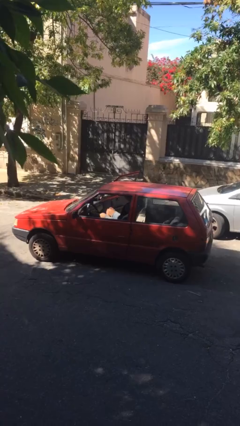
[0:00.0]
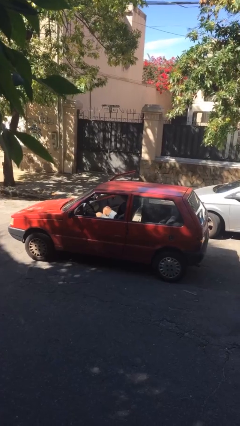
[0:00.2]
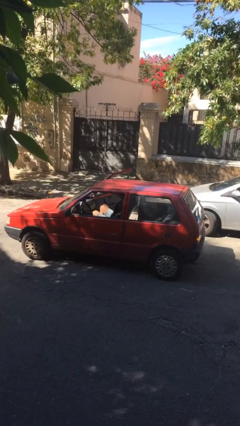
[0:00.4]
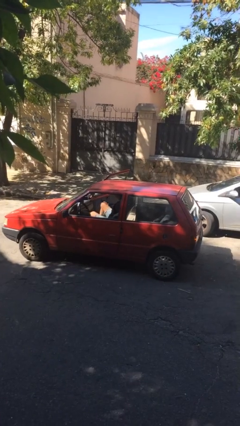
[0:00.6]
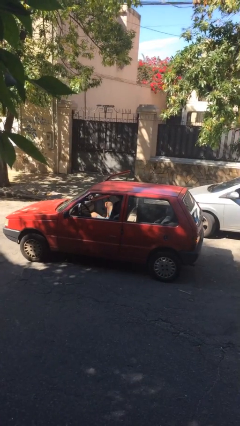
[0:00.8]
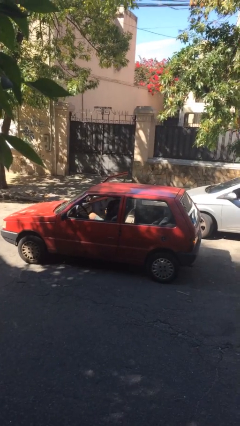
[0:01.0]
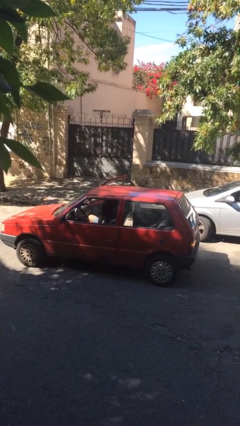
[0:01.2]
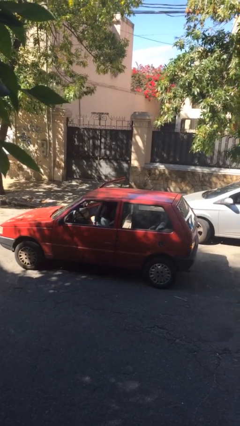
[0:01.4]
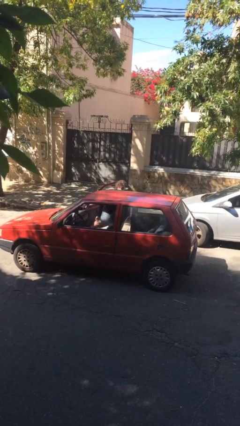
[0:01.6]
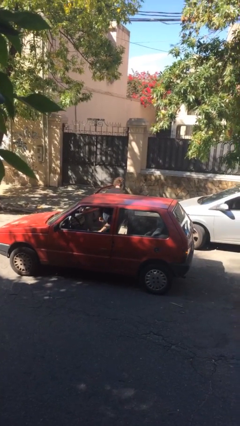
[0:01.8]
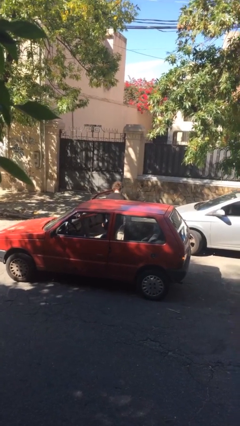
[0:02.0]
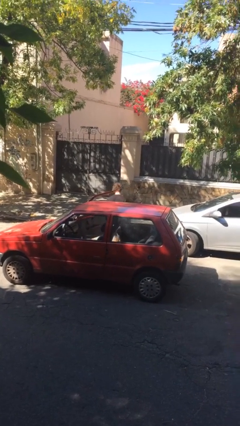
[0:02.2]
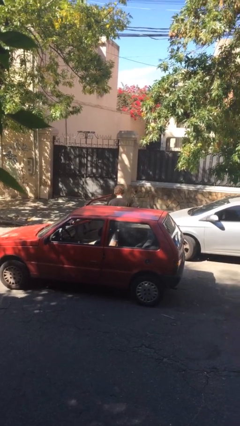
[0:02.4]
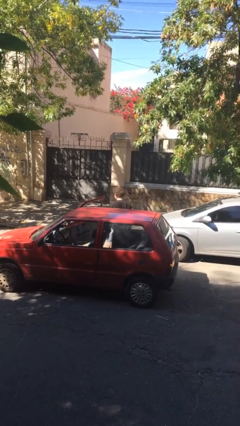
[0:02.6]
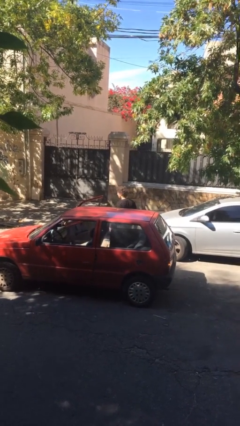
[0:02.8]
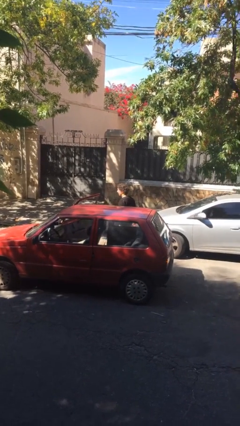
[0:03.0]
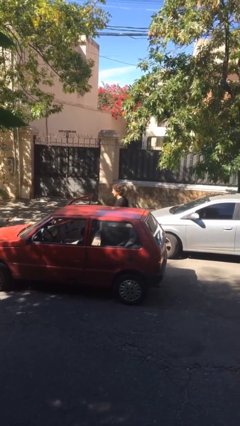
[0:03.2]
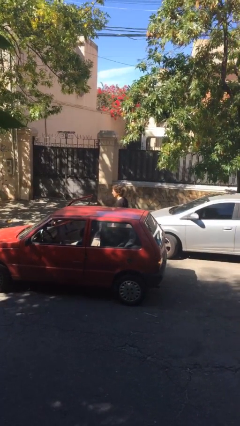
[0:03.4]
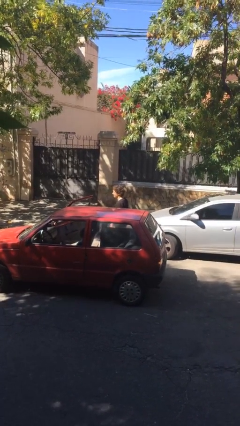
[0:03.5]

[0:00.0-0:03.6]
person exits car

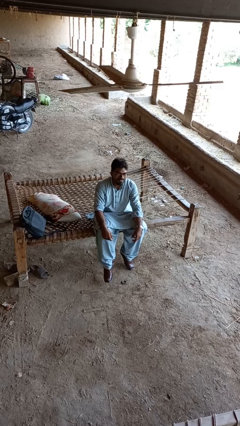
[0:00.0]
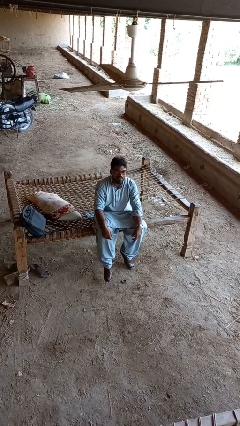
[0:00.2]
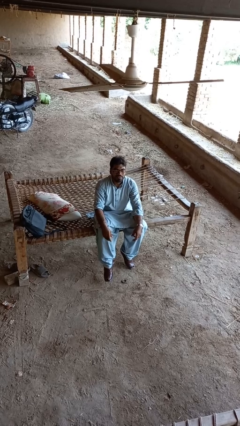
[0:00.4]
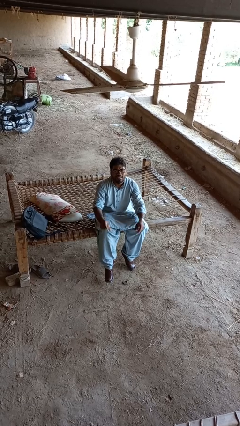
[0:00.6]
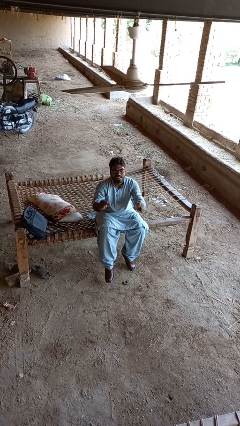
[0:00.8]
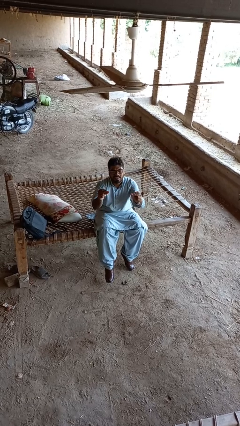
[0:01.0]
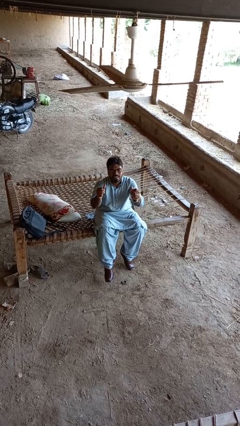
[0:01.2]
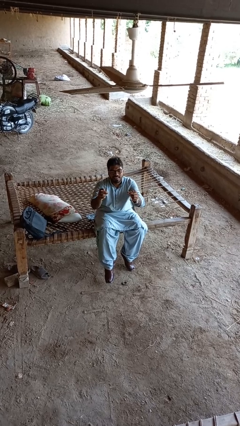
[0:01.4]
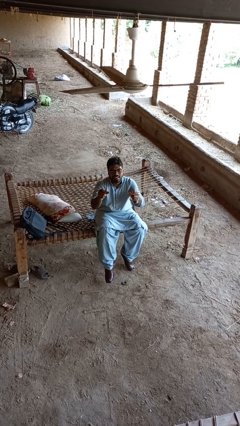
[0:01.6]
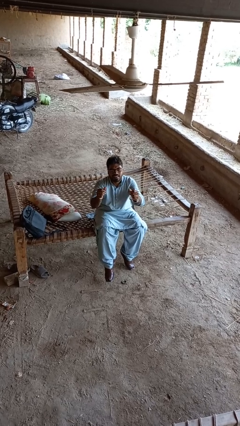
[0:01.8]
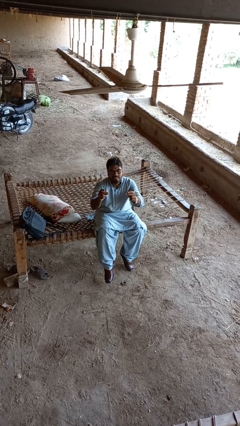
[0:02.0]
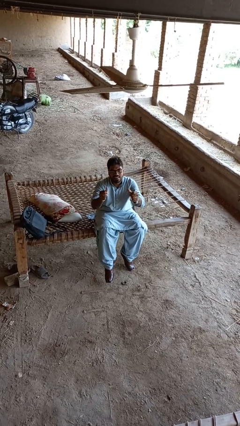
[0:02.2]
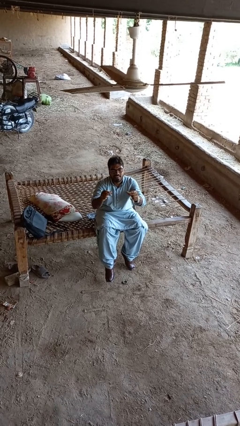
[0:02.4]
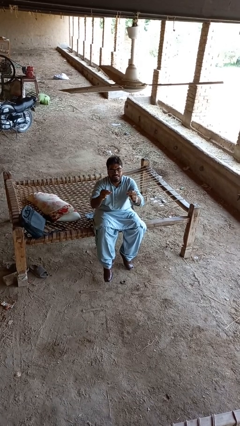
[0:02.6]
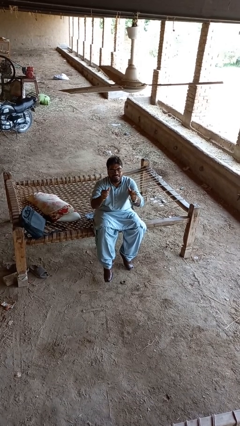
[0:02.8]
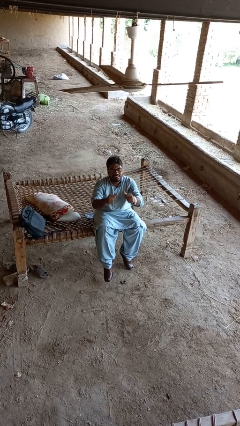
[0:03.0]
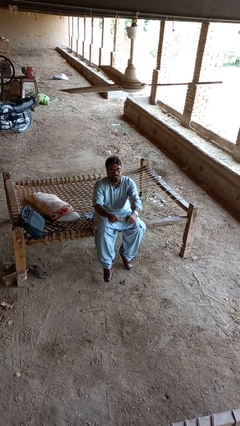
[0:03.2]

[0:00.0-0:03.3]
person snaps fingers

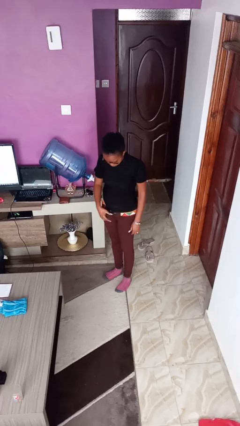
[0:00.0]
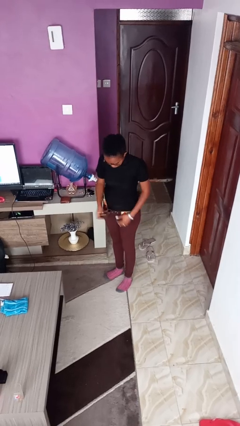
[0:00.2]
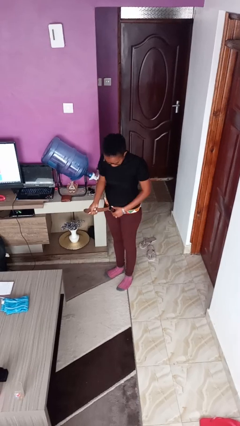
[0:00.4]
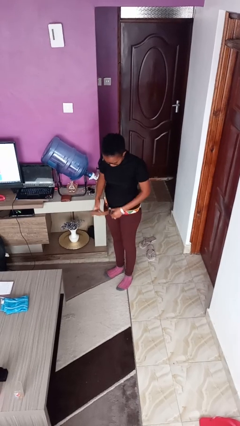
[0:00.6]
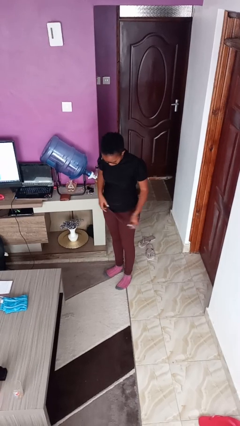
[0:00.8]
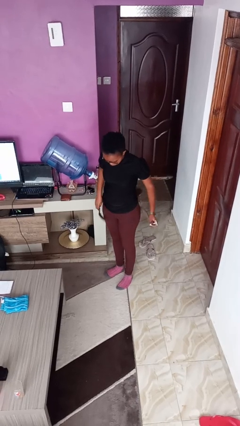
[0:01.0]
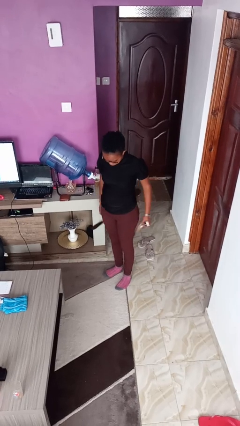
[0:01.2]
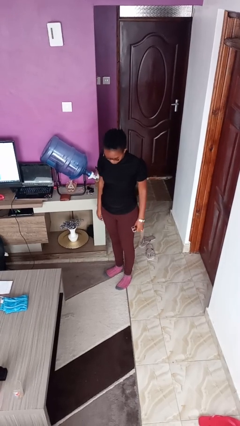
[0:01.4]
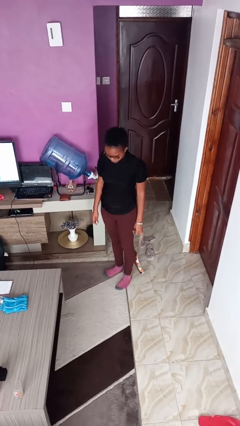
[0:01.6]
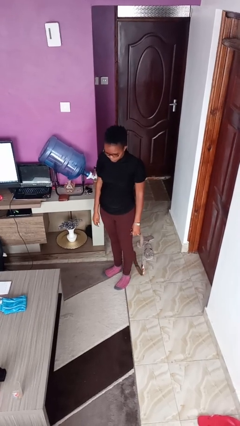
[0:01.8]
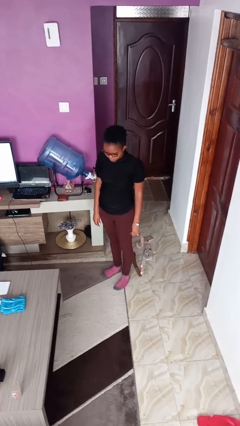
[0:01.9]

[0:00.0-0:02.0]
person takes off belt

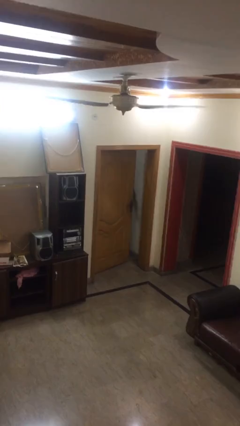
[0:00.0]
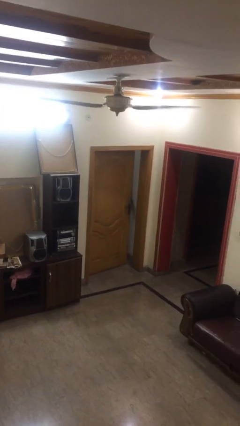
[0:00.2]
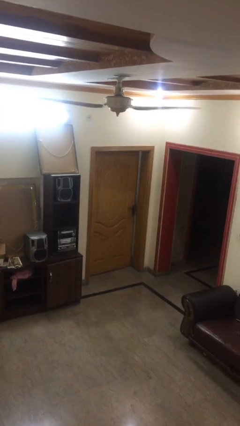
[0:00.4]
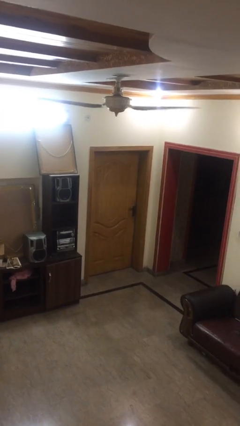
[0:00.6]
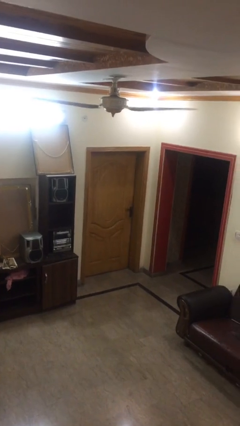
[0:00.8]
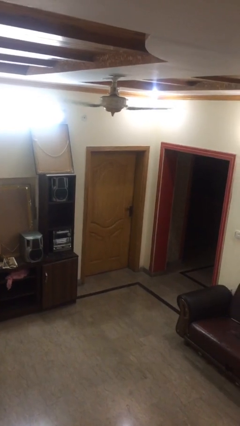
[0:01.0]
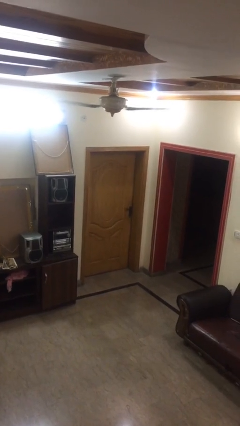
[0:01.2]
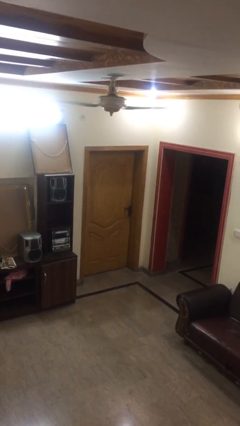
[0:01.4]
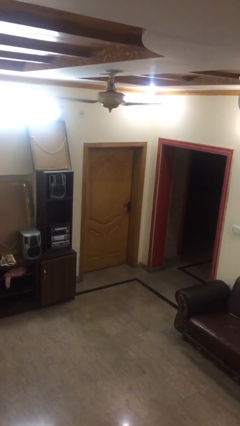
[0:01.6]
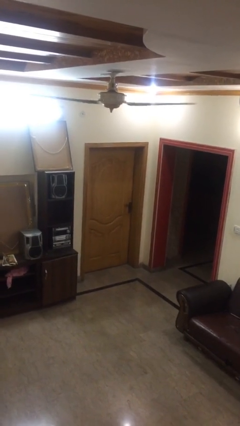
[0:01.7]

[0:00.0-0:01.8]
person closes facility door

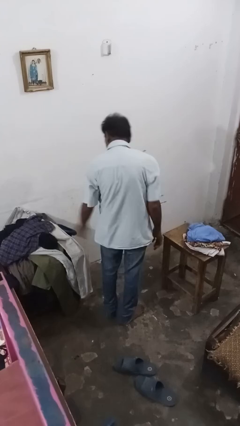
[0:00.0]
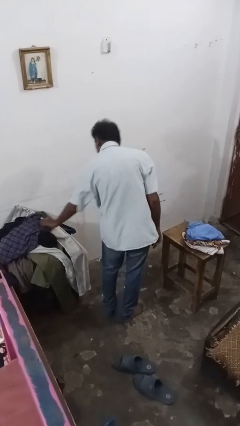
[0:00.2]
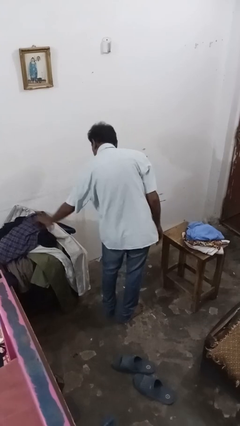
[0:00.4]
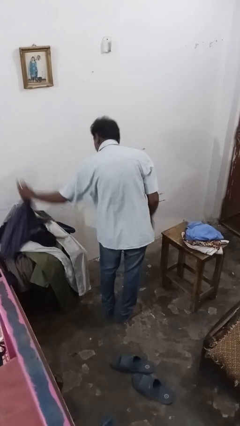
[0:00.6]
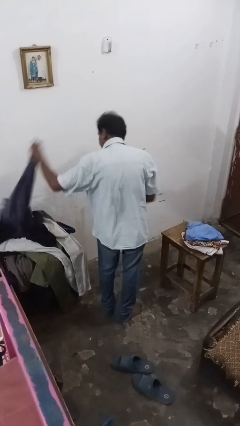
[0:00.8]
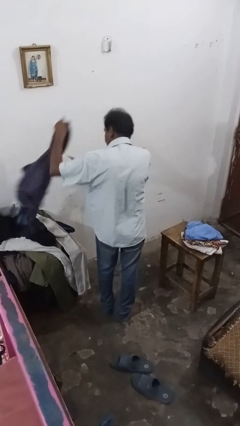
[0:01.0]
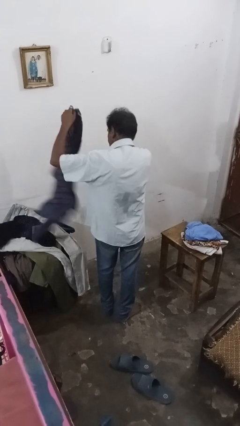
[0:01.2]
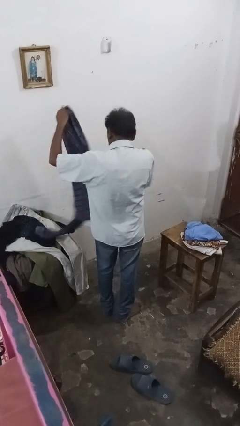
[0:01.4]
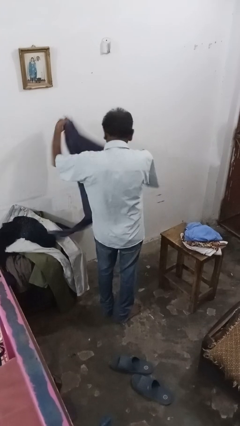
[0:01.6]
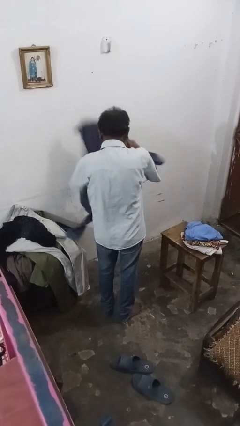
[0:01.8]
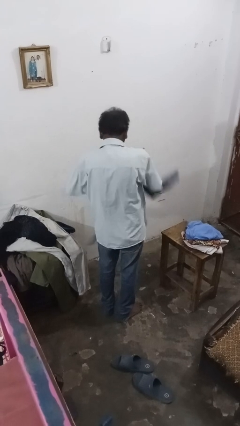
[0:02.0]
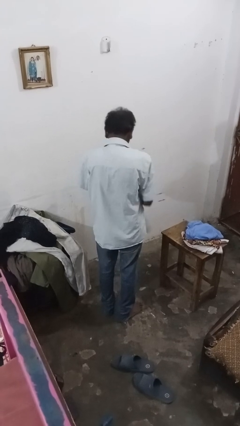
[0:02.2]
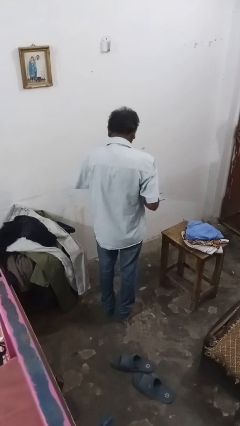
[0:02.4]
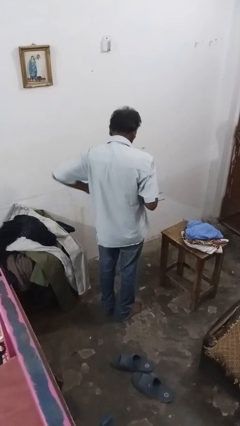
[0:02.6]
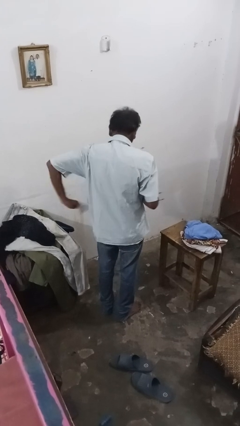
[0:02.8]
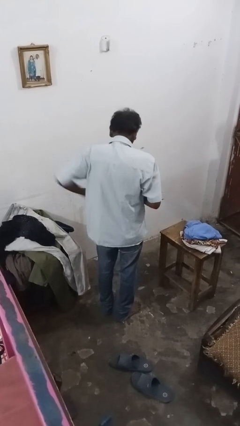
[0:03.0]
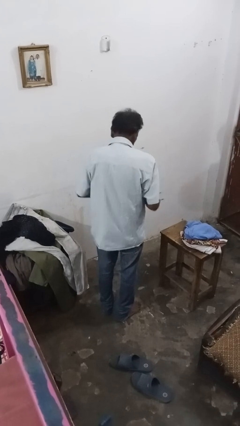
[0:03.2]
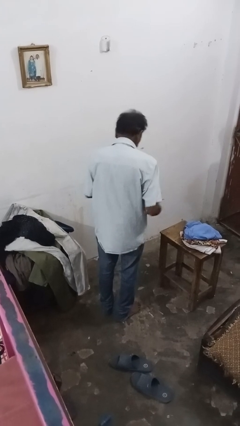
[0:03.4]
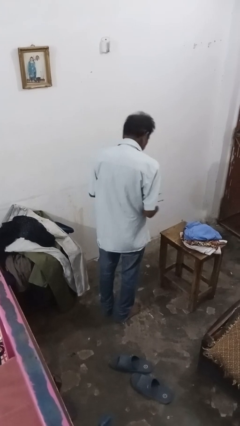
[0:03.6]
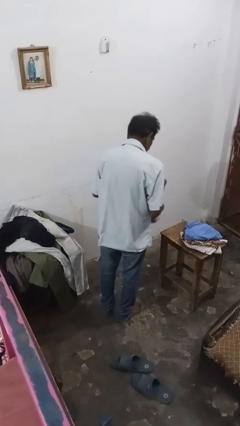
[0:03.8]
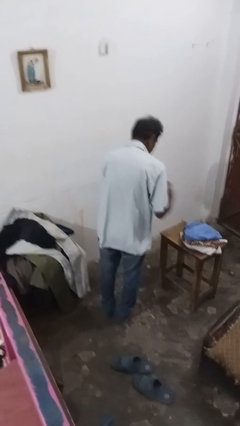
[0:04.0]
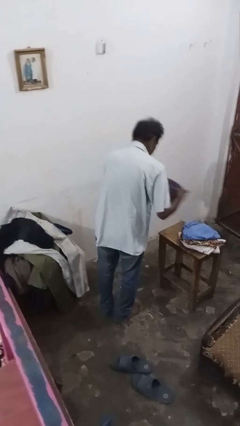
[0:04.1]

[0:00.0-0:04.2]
person folds shirt

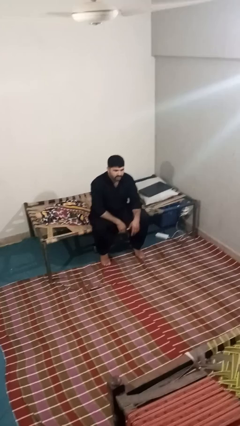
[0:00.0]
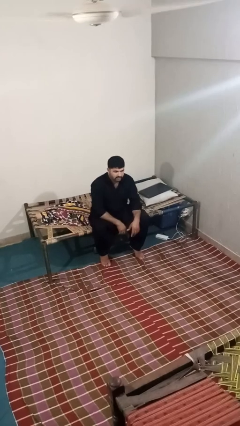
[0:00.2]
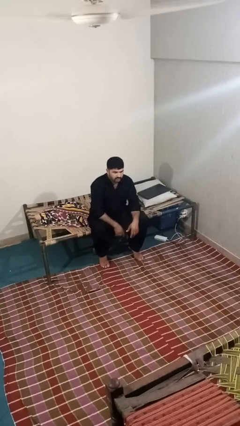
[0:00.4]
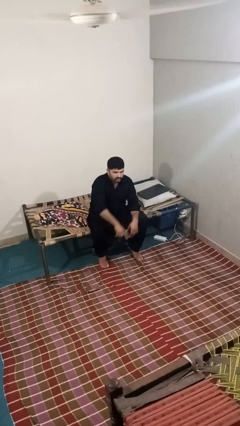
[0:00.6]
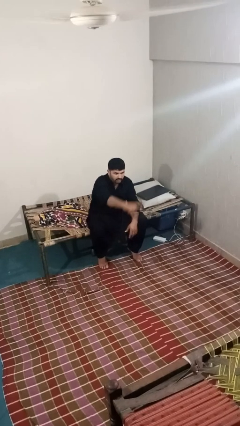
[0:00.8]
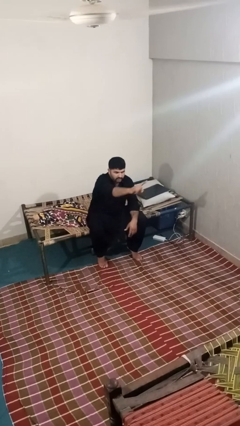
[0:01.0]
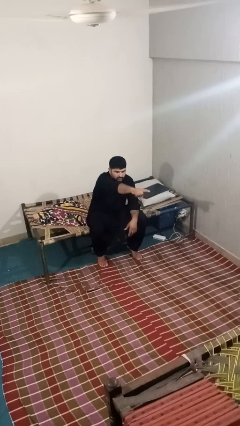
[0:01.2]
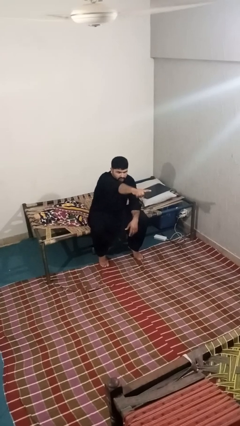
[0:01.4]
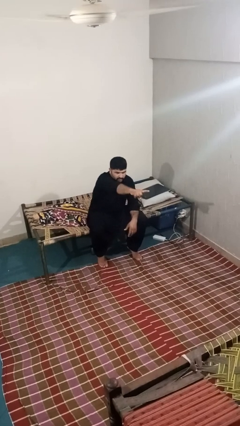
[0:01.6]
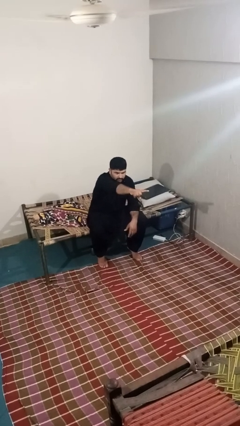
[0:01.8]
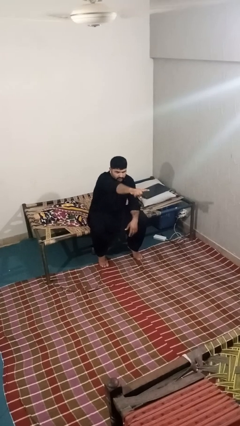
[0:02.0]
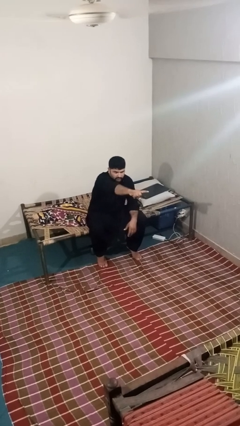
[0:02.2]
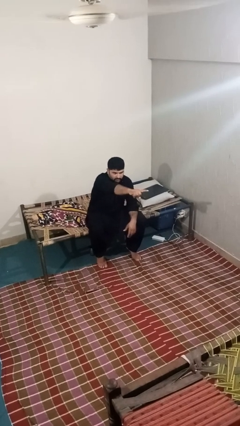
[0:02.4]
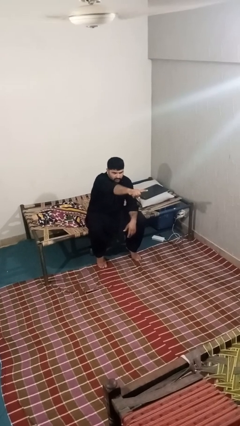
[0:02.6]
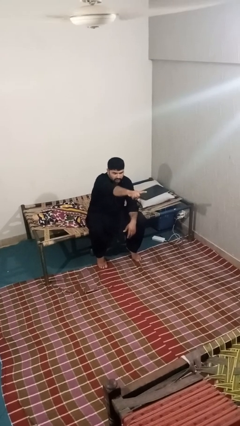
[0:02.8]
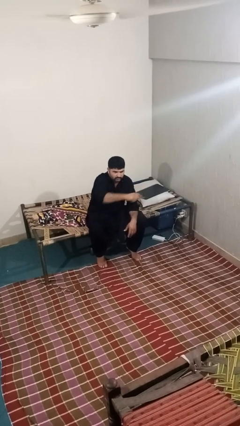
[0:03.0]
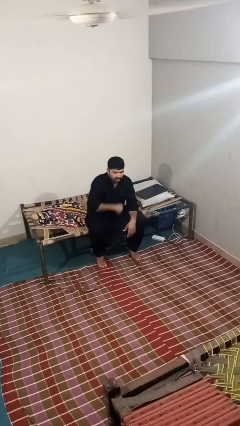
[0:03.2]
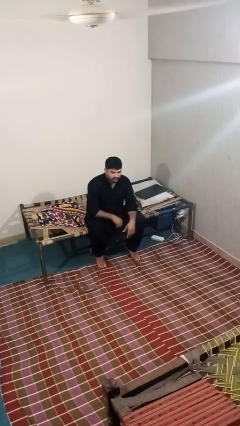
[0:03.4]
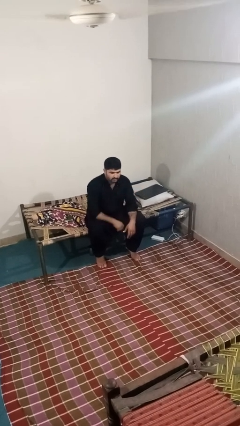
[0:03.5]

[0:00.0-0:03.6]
person points at person
